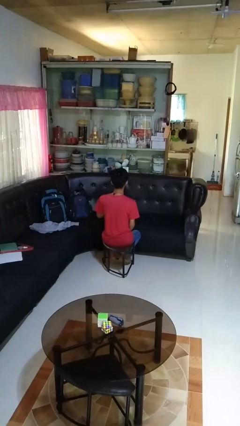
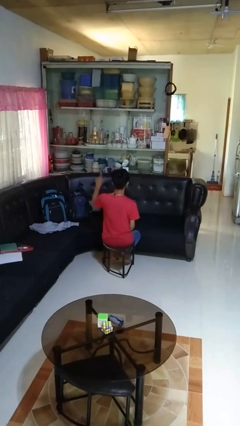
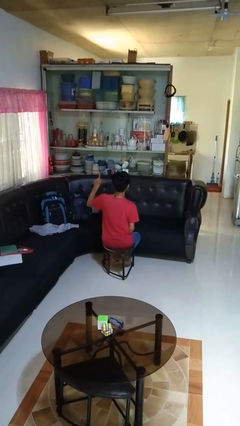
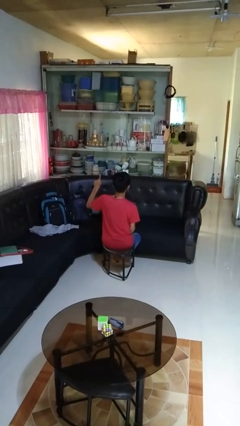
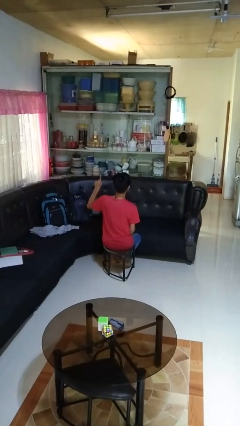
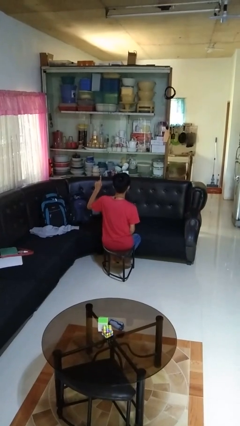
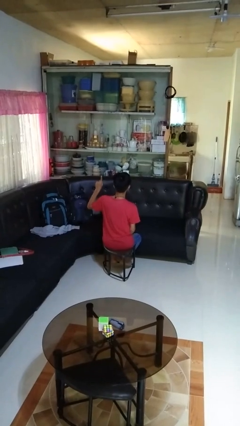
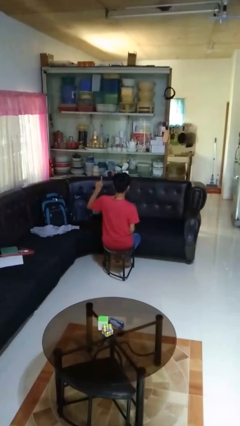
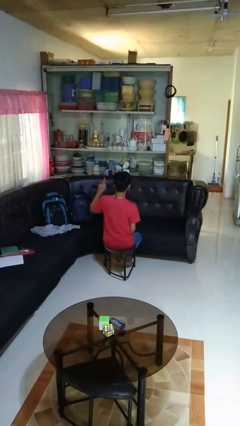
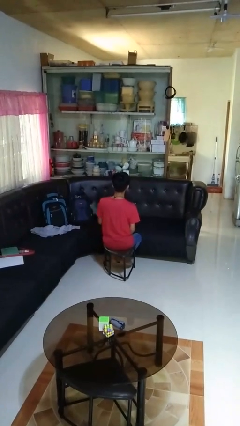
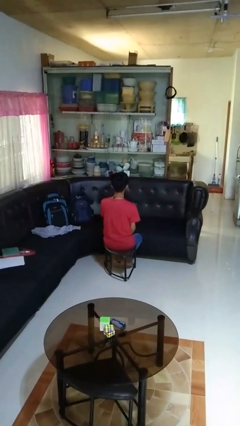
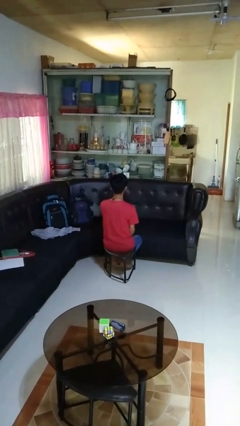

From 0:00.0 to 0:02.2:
person gestures number one

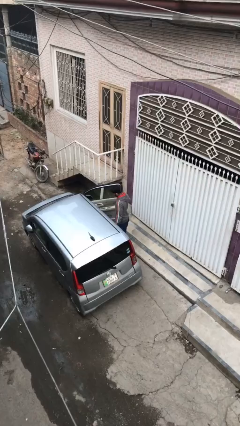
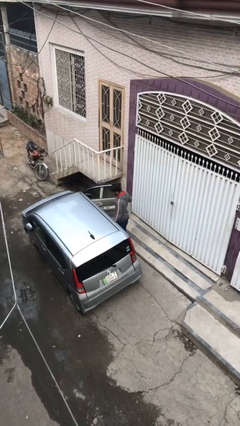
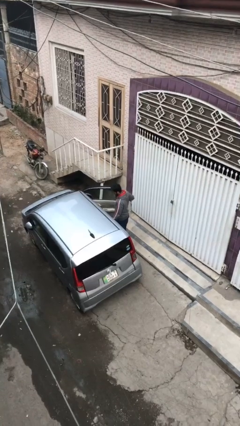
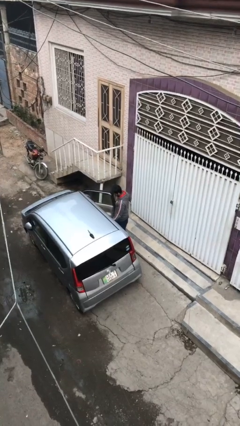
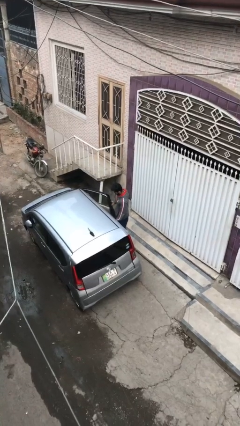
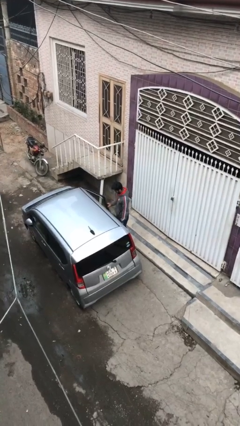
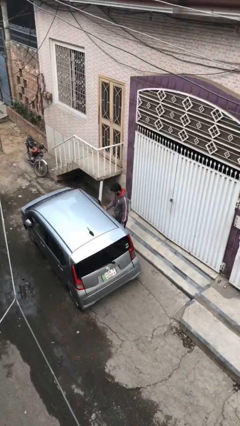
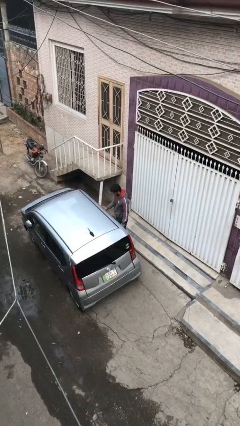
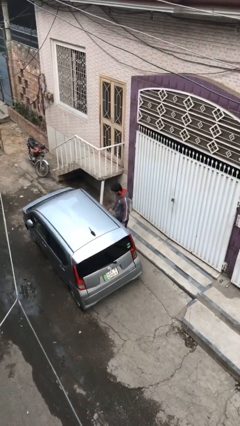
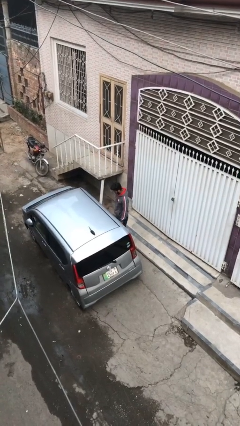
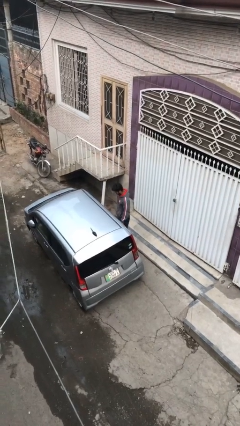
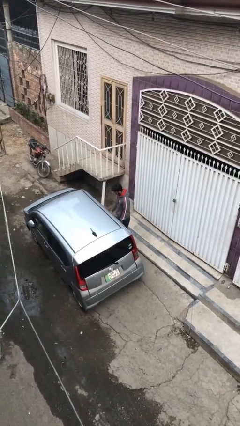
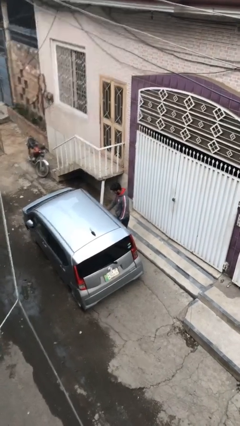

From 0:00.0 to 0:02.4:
person closes car door

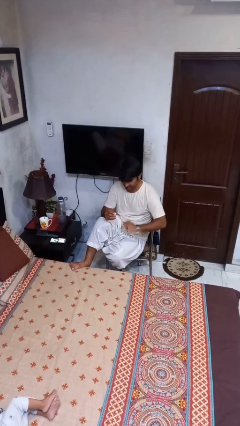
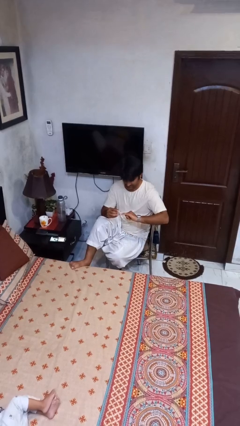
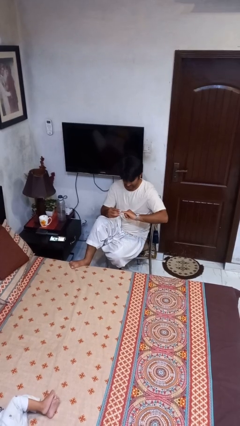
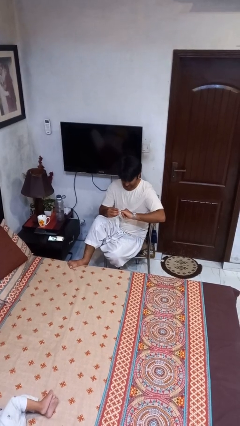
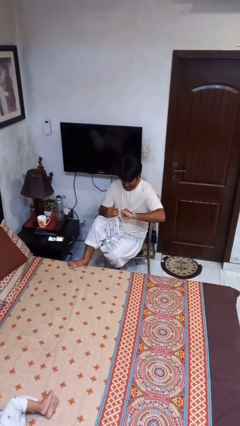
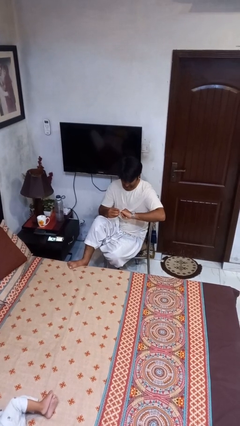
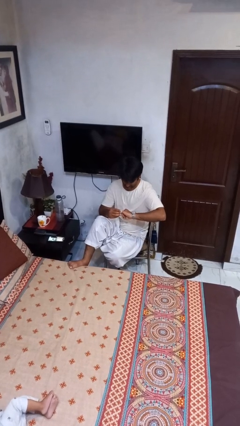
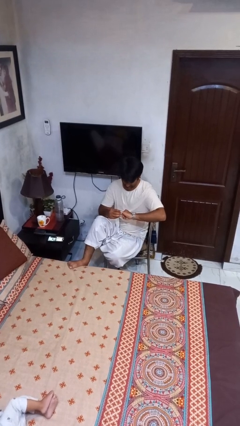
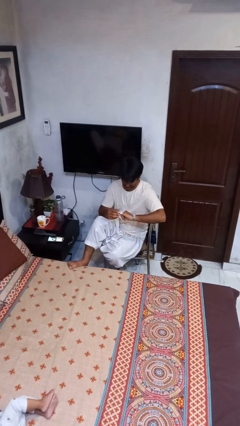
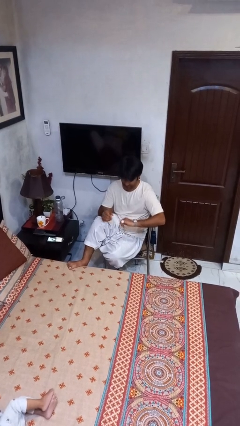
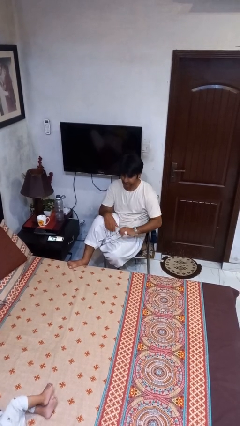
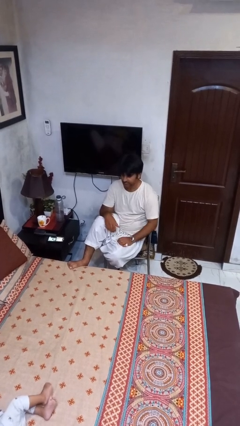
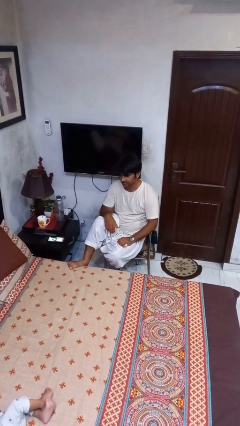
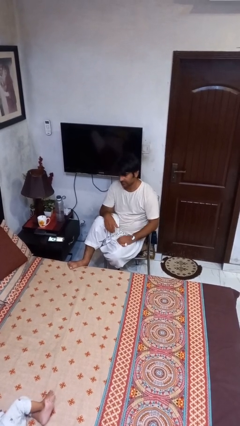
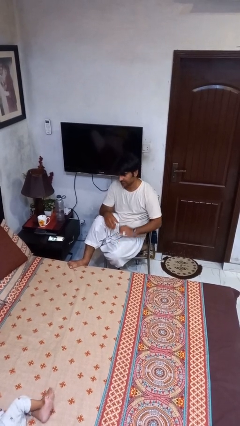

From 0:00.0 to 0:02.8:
person puts on ring

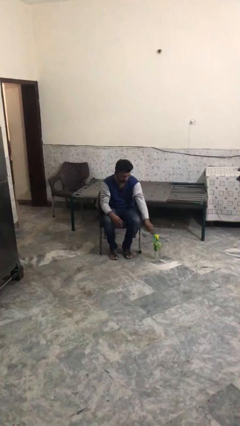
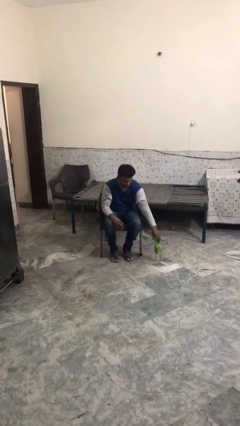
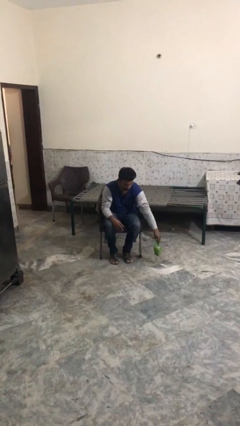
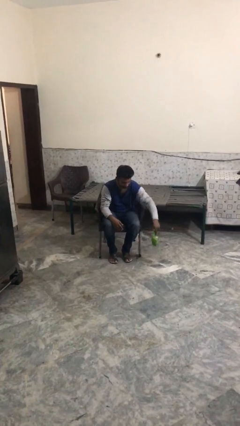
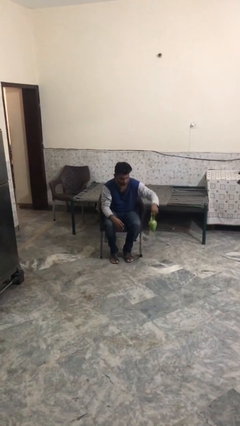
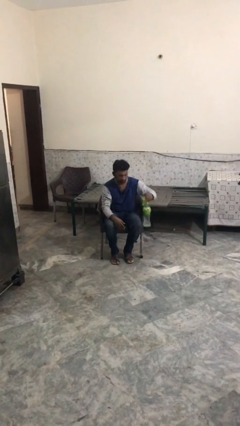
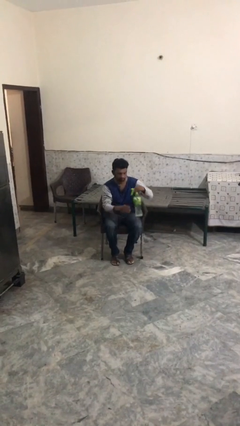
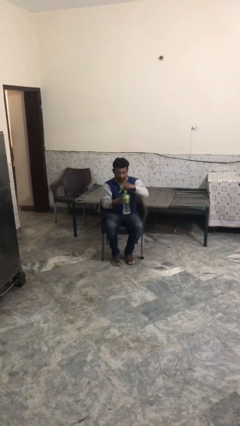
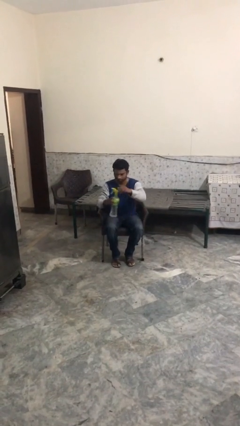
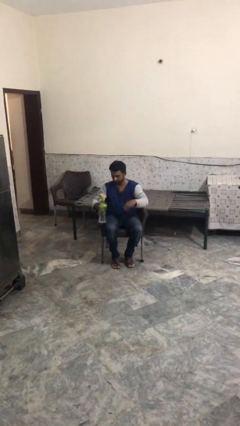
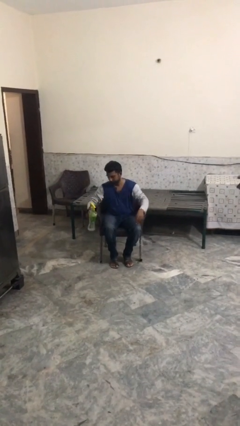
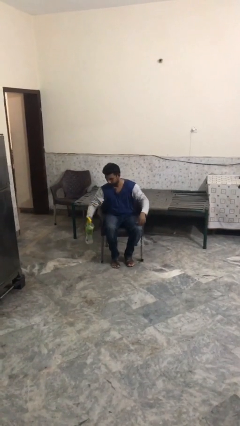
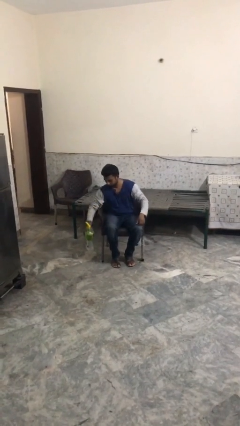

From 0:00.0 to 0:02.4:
person picks up object from floor

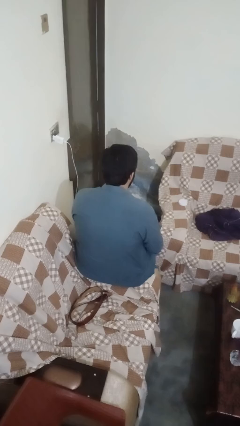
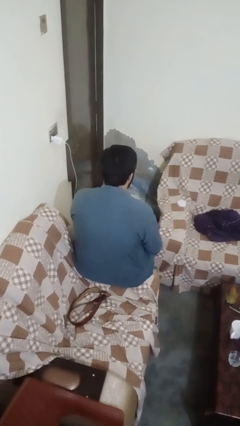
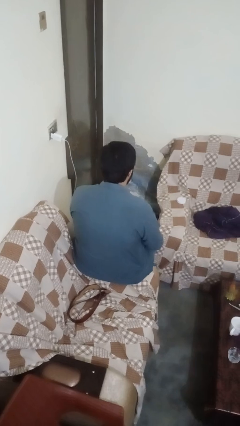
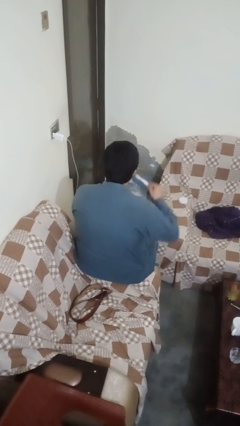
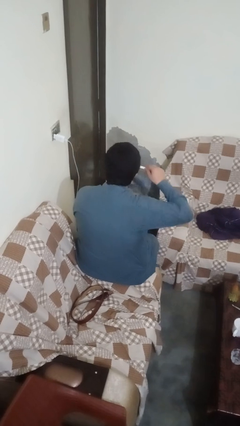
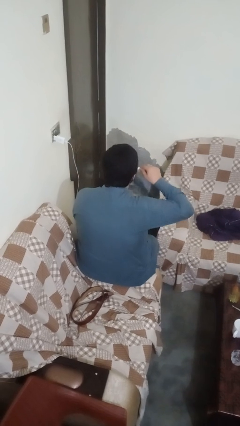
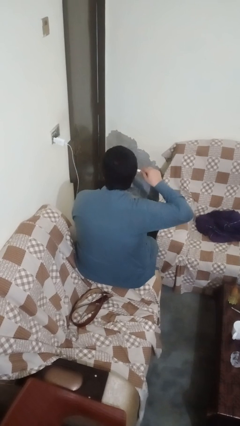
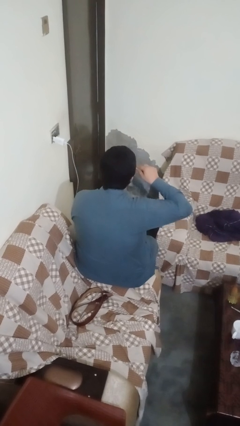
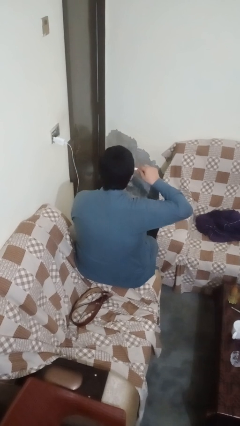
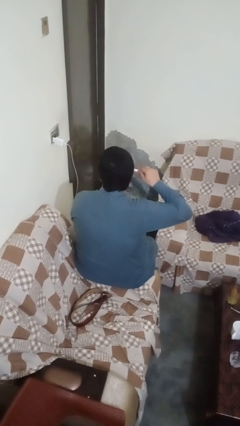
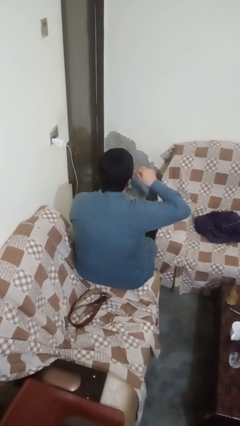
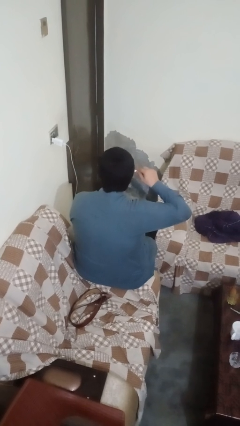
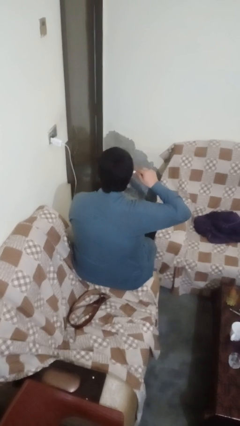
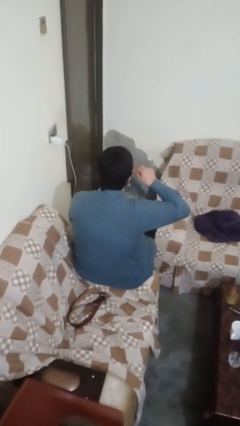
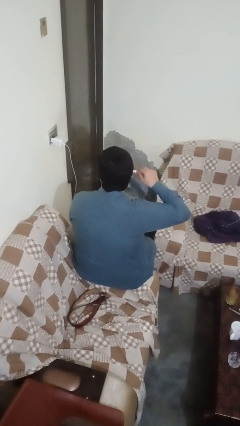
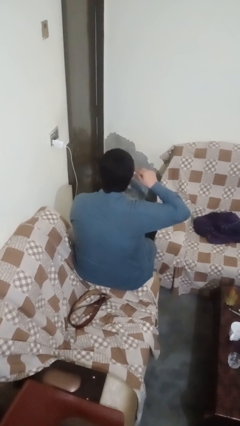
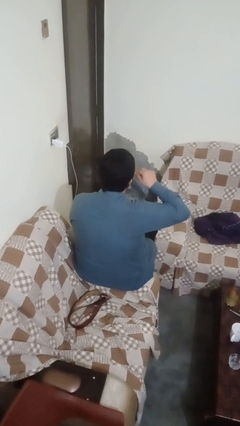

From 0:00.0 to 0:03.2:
person brushes teeth

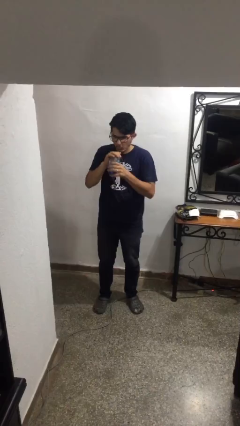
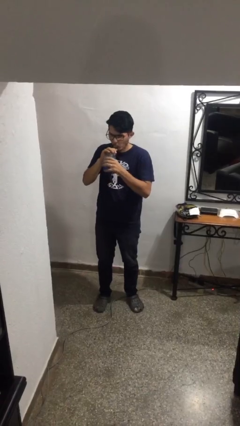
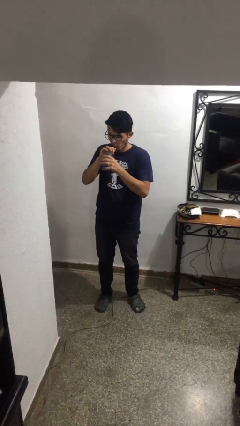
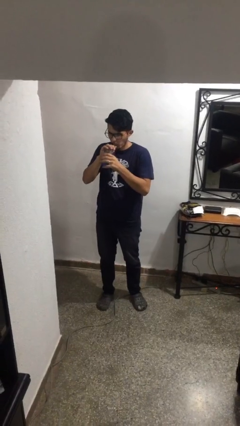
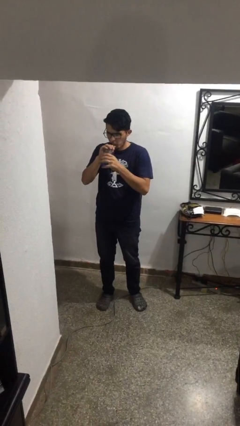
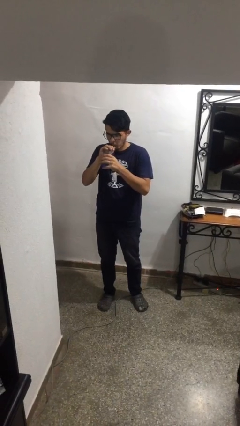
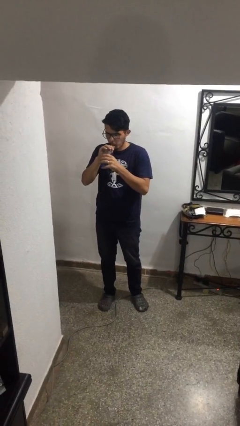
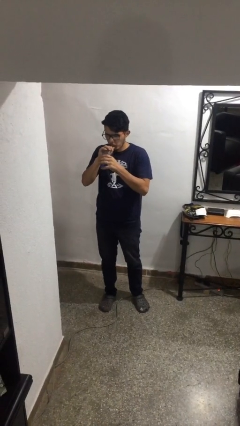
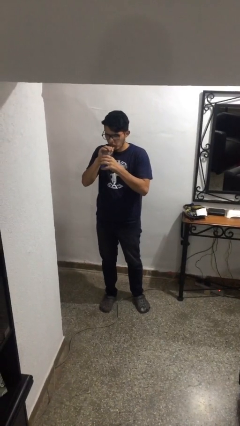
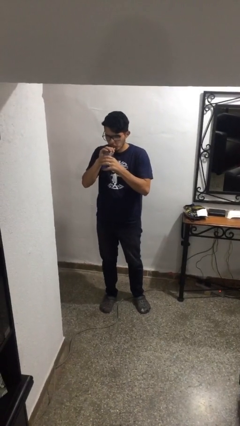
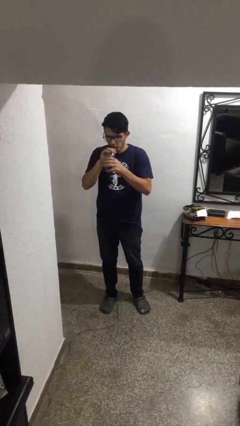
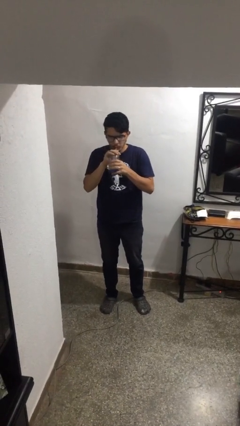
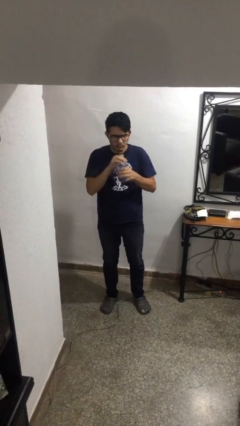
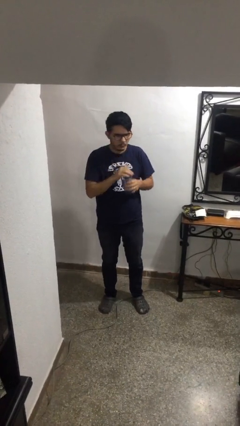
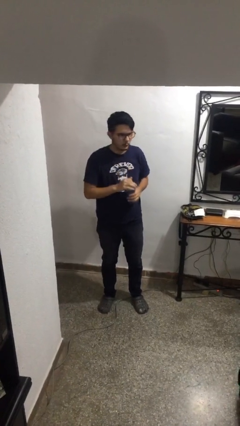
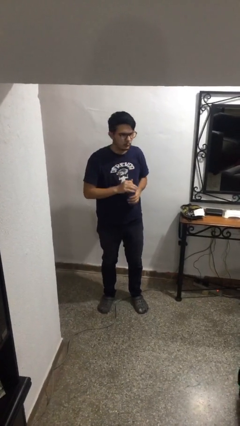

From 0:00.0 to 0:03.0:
person drinks from straw

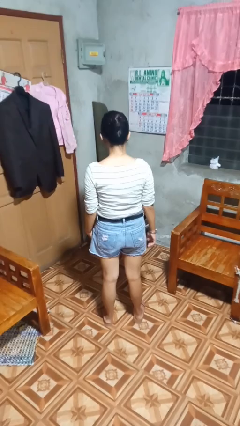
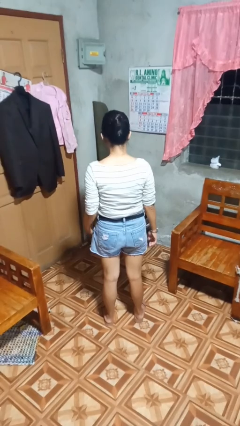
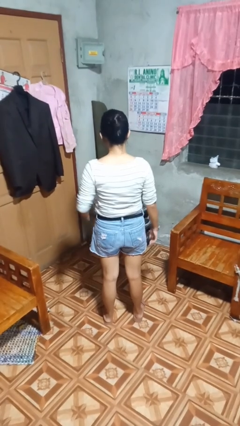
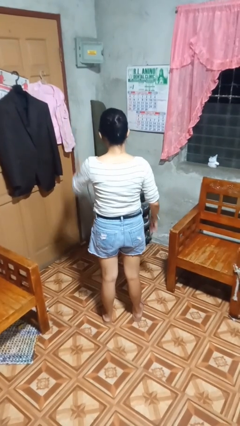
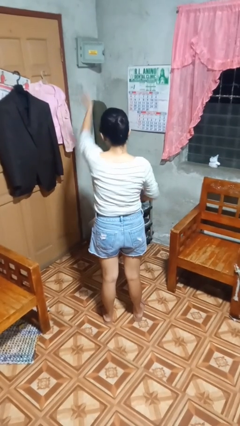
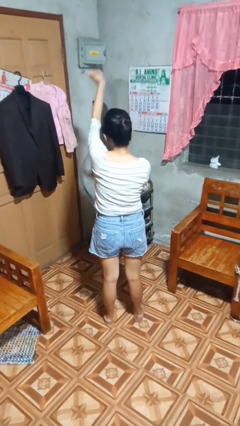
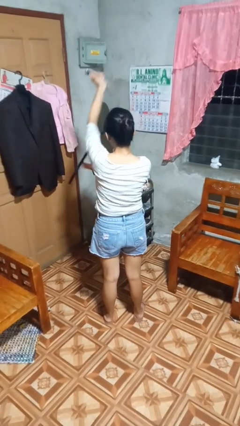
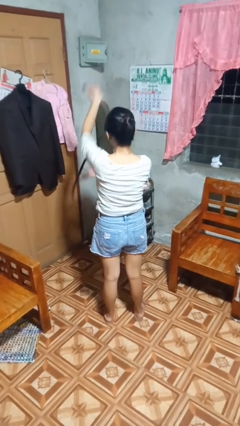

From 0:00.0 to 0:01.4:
person takes off belt

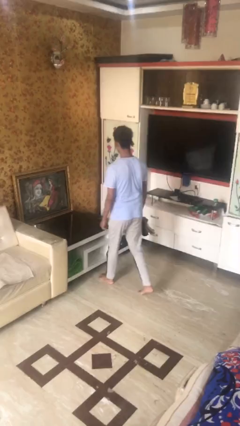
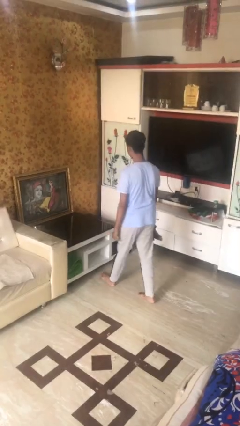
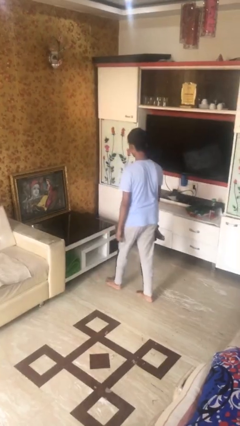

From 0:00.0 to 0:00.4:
person picks up object from table
